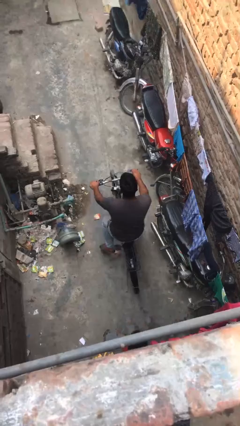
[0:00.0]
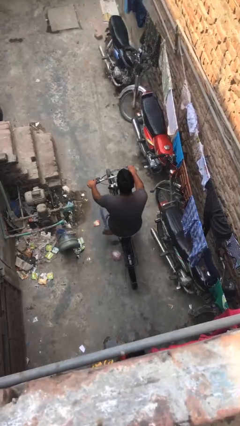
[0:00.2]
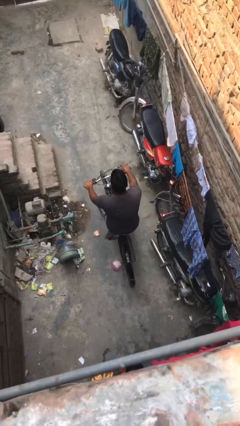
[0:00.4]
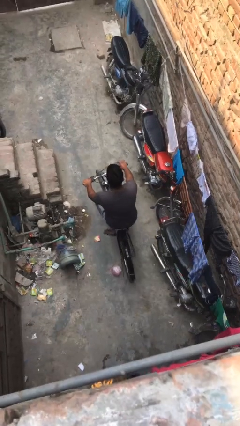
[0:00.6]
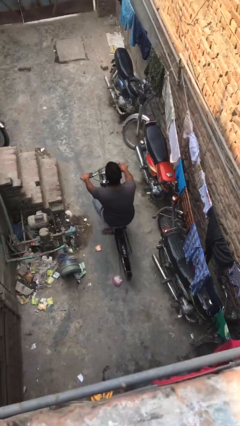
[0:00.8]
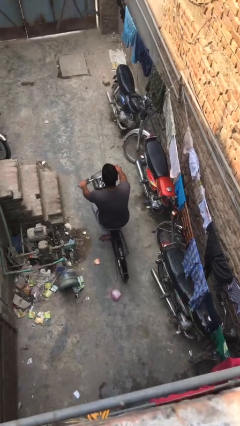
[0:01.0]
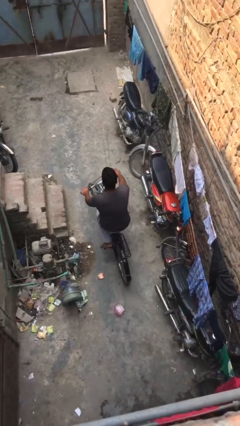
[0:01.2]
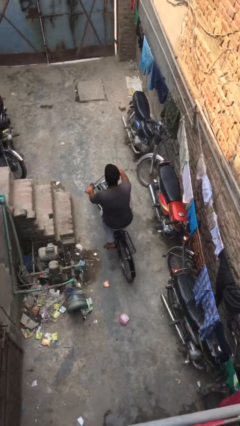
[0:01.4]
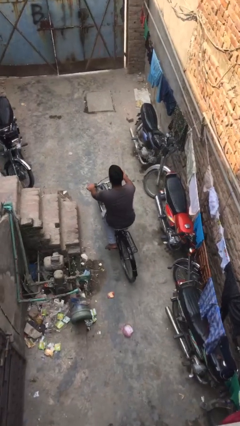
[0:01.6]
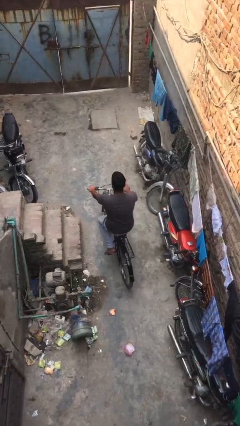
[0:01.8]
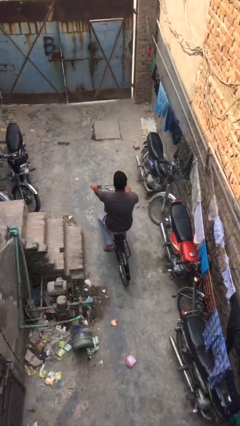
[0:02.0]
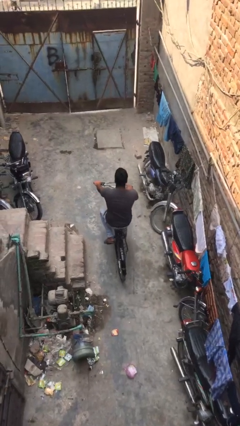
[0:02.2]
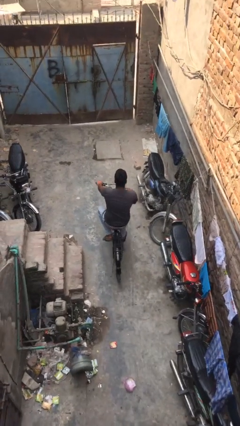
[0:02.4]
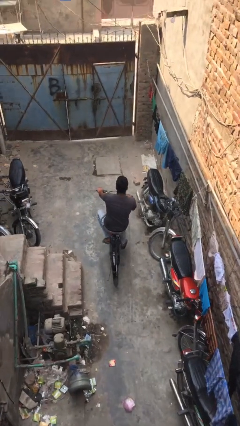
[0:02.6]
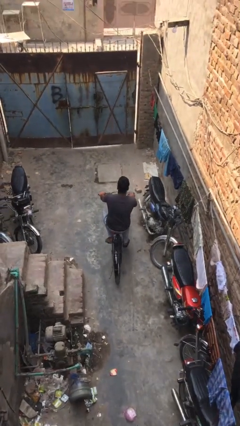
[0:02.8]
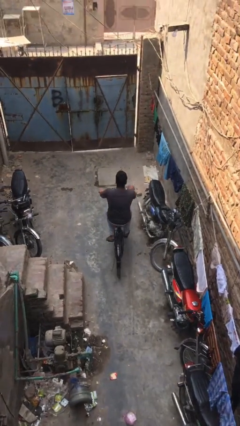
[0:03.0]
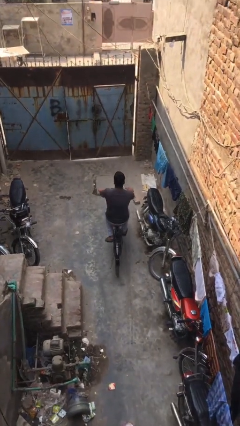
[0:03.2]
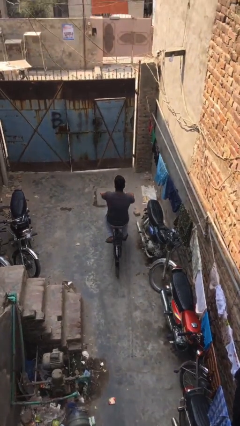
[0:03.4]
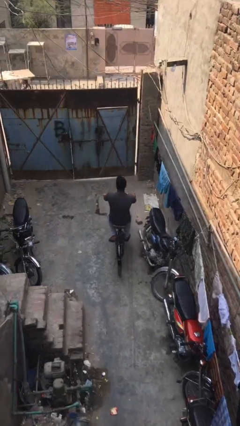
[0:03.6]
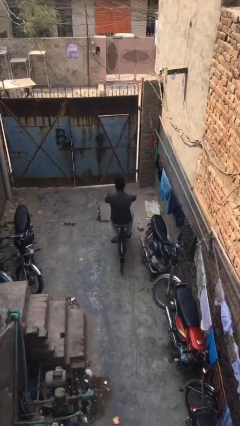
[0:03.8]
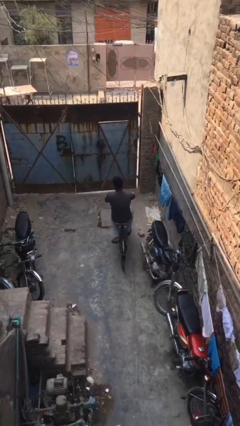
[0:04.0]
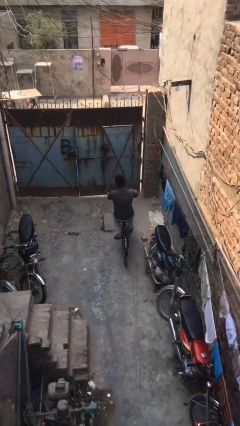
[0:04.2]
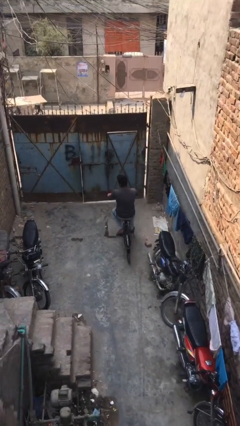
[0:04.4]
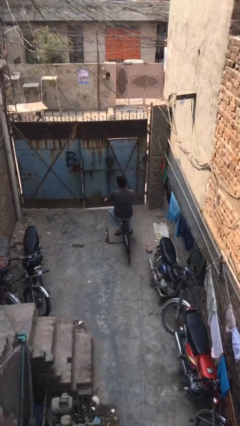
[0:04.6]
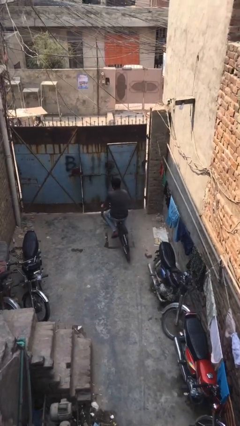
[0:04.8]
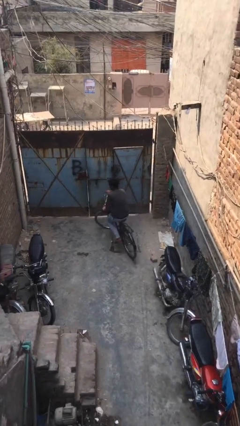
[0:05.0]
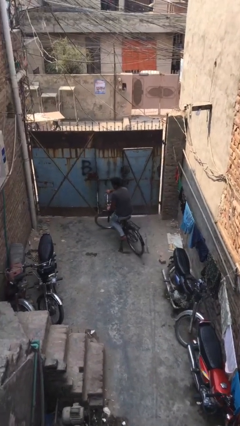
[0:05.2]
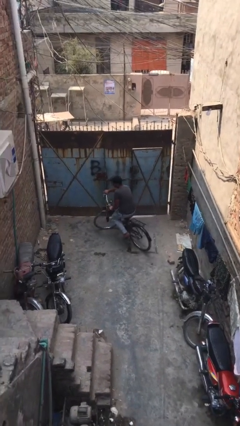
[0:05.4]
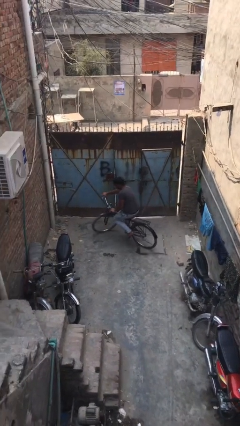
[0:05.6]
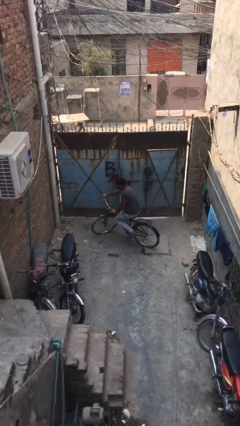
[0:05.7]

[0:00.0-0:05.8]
person rides bicycle

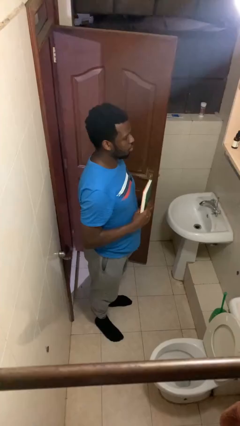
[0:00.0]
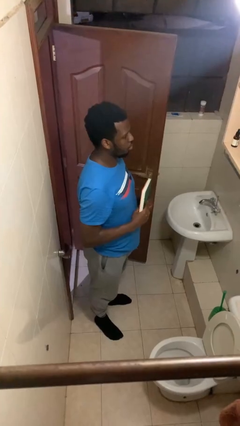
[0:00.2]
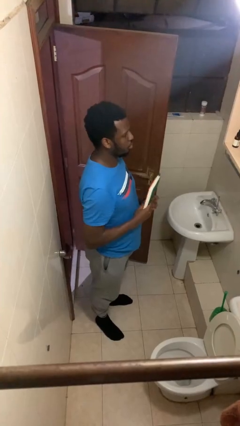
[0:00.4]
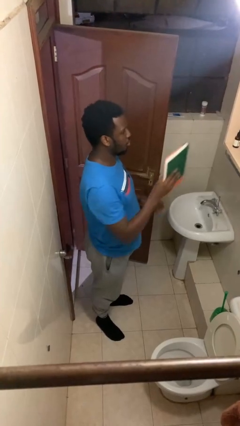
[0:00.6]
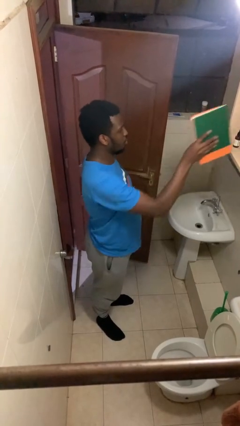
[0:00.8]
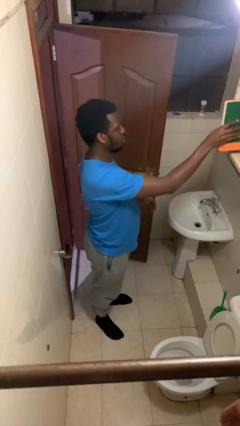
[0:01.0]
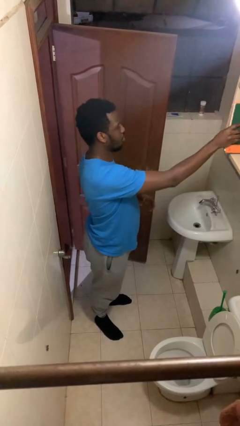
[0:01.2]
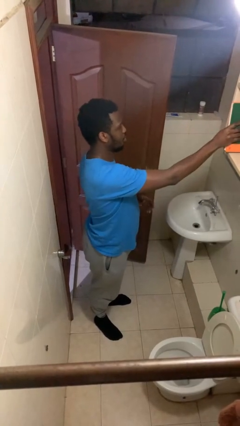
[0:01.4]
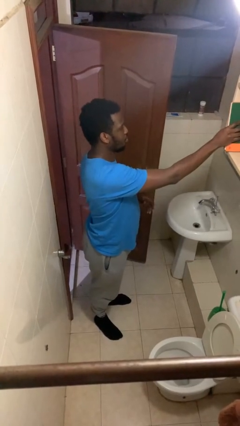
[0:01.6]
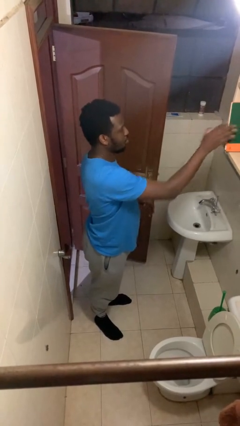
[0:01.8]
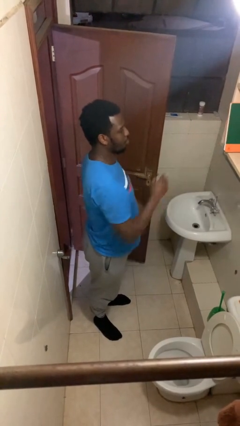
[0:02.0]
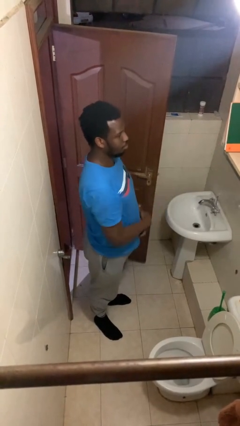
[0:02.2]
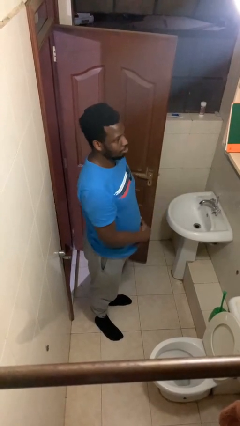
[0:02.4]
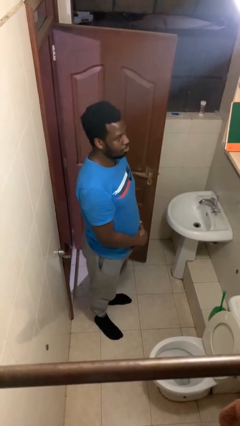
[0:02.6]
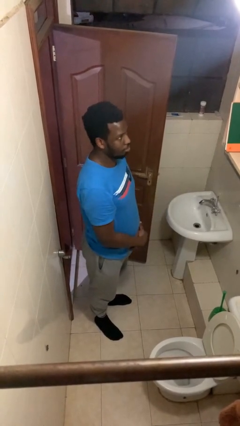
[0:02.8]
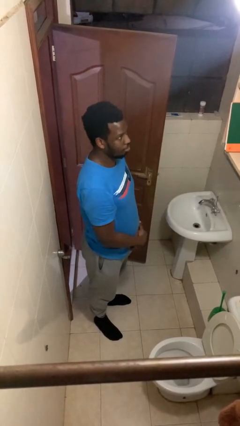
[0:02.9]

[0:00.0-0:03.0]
person puts down object into cabinet

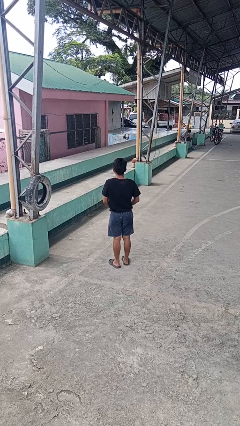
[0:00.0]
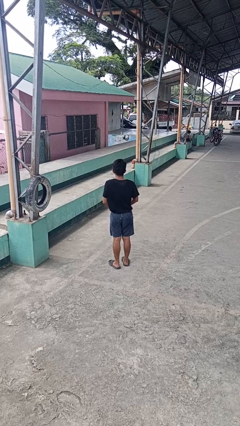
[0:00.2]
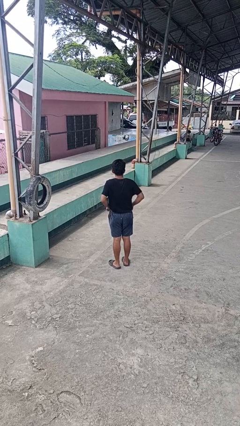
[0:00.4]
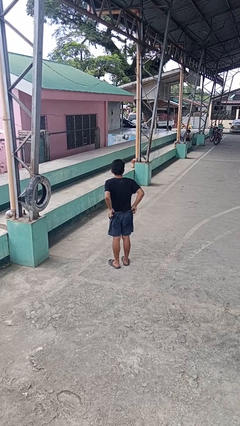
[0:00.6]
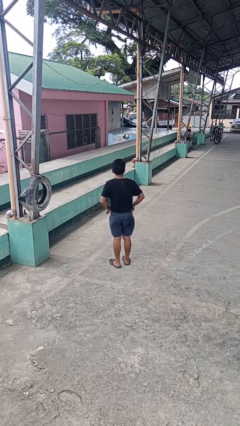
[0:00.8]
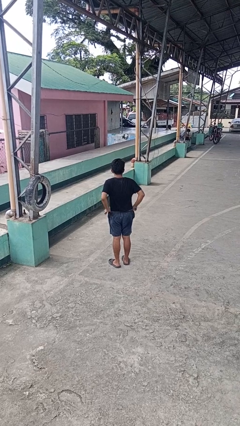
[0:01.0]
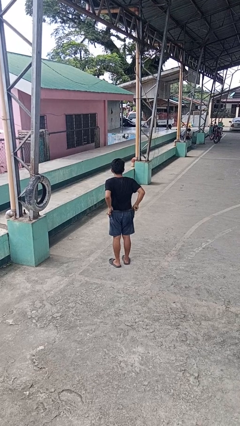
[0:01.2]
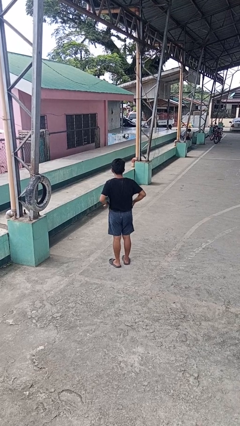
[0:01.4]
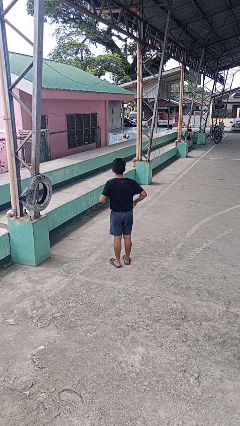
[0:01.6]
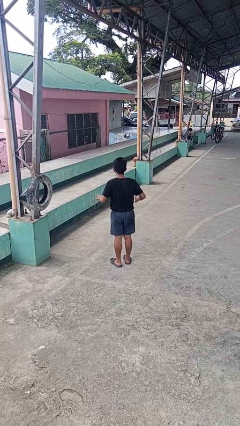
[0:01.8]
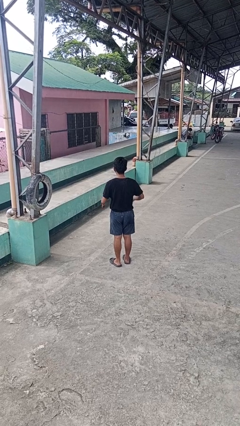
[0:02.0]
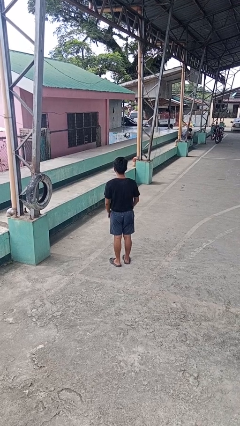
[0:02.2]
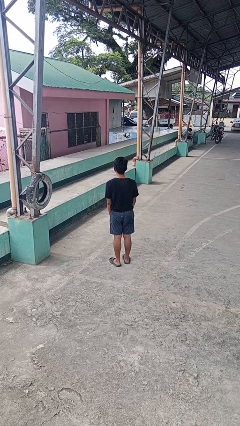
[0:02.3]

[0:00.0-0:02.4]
person hikes up pants

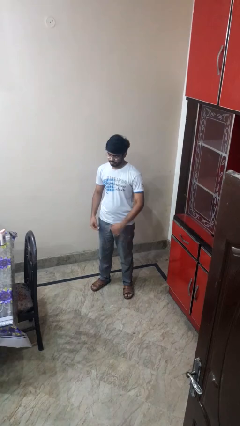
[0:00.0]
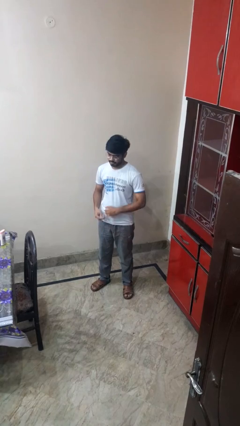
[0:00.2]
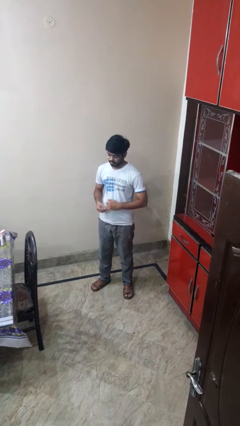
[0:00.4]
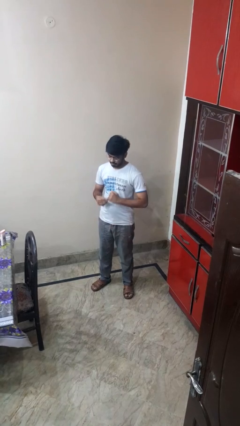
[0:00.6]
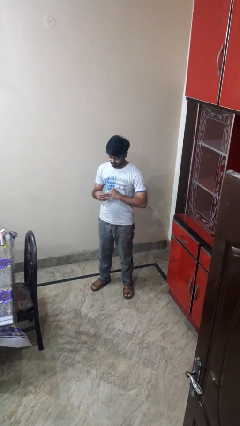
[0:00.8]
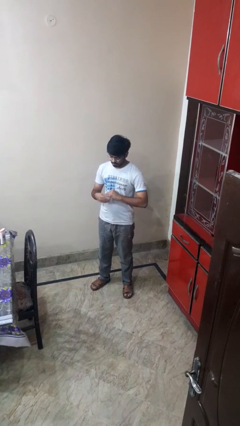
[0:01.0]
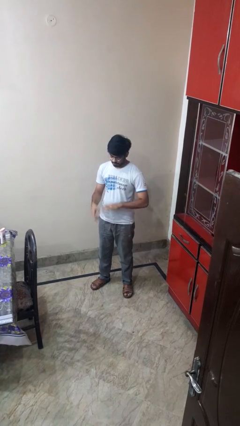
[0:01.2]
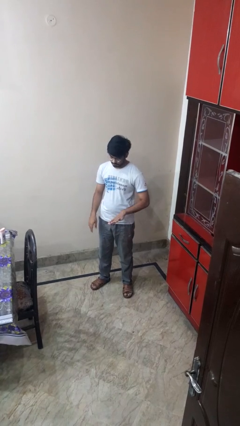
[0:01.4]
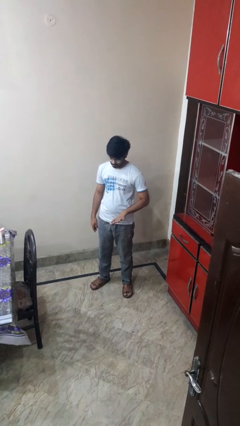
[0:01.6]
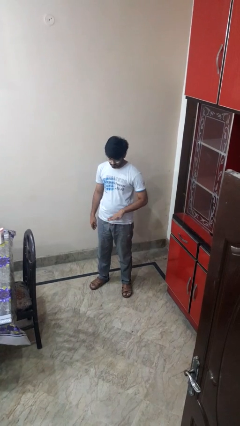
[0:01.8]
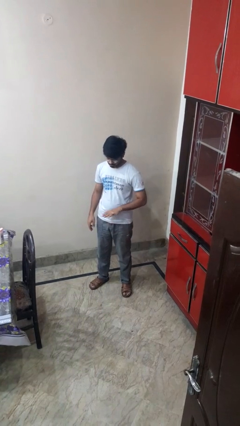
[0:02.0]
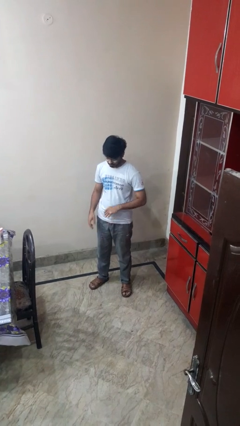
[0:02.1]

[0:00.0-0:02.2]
person puts on ring

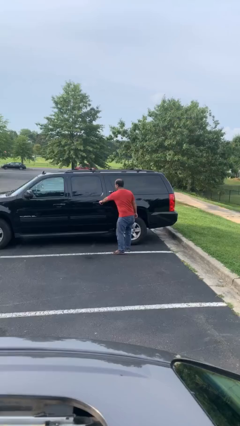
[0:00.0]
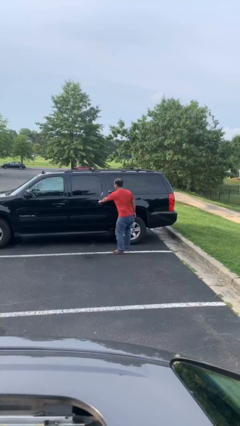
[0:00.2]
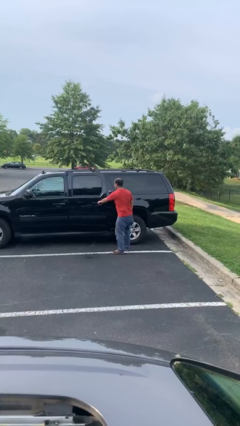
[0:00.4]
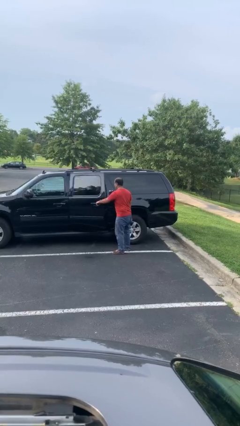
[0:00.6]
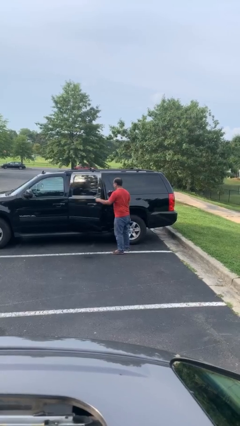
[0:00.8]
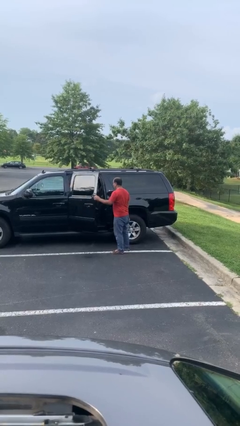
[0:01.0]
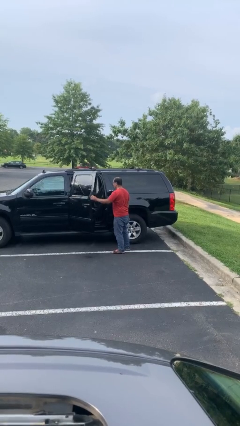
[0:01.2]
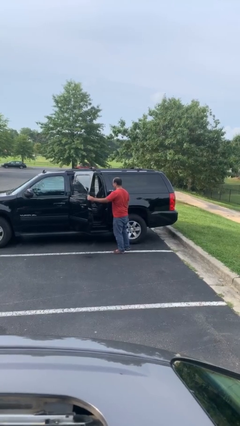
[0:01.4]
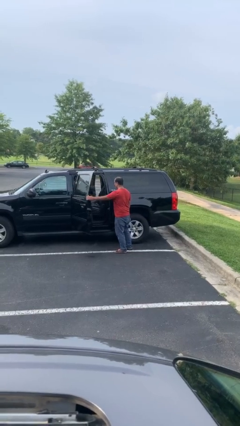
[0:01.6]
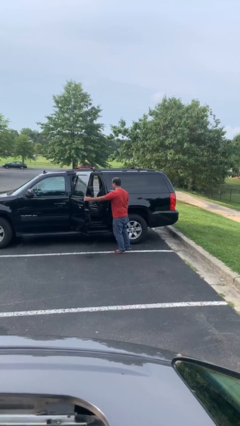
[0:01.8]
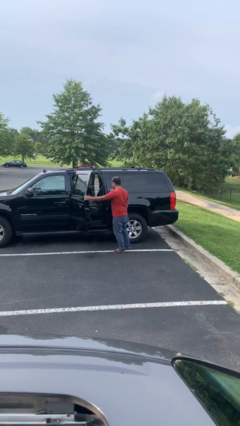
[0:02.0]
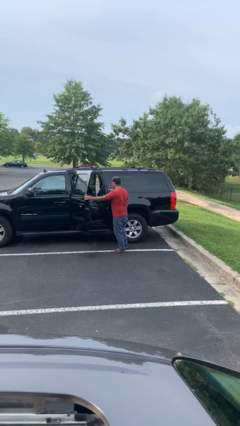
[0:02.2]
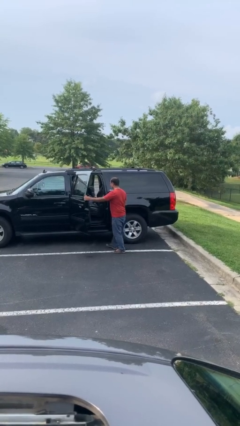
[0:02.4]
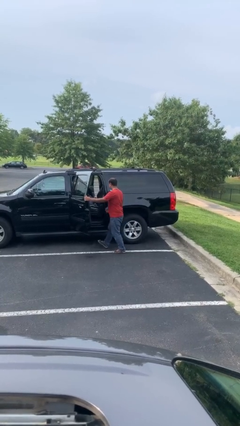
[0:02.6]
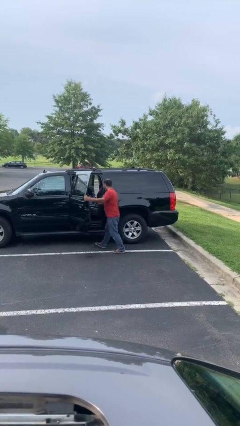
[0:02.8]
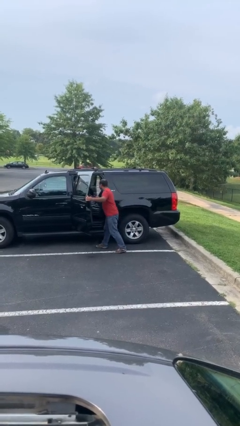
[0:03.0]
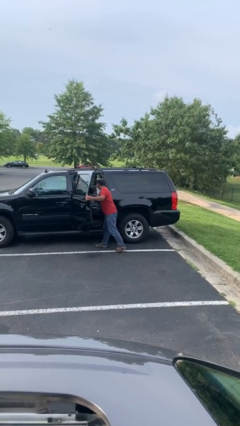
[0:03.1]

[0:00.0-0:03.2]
person opens car door

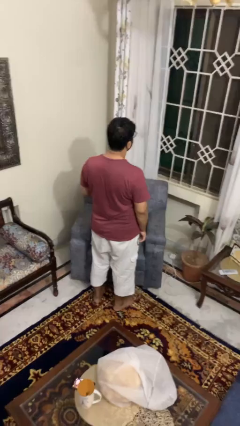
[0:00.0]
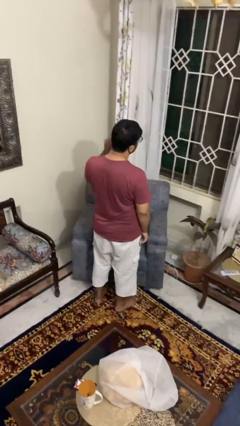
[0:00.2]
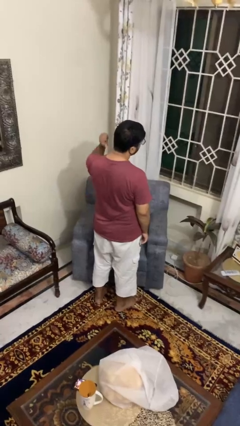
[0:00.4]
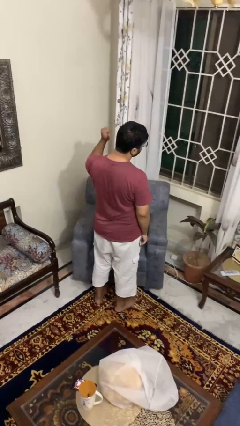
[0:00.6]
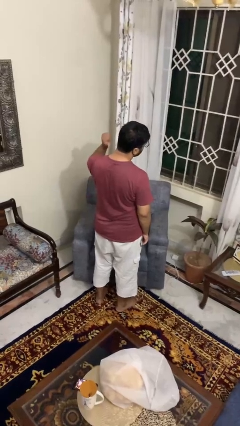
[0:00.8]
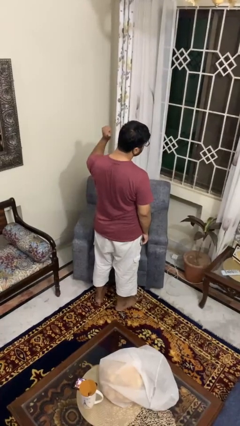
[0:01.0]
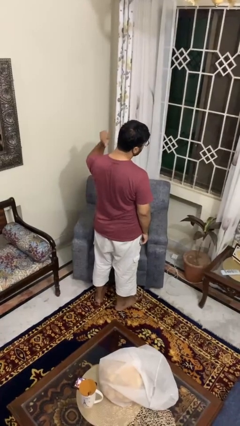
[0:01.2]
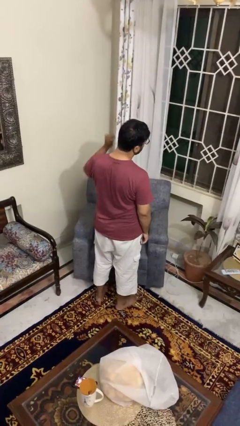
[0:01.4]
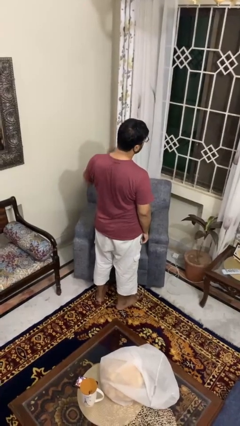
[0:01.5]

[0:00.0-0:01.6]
person gestures behind me
